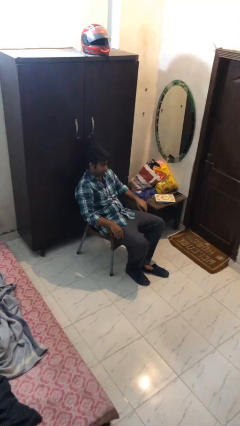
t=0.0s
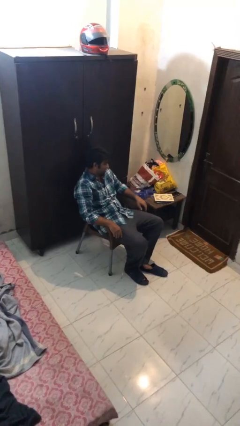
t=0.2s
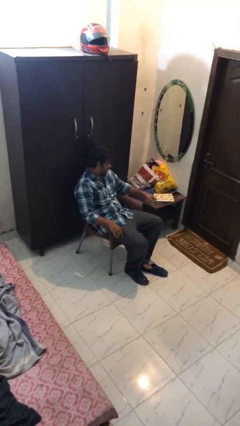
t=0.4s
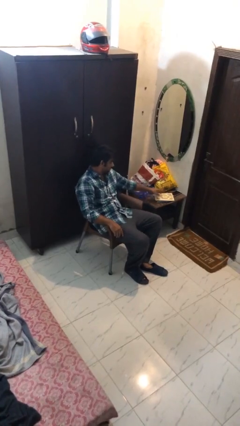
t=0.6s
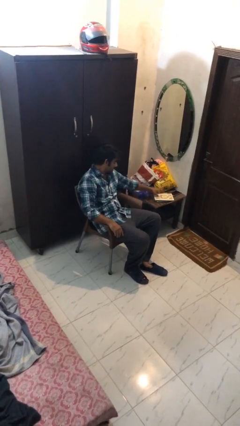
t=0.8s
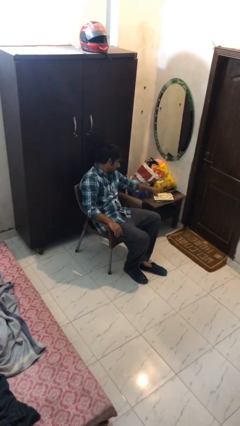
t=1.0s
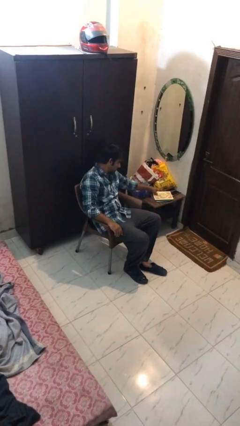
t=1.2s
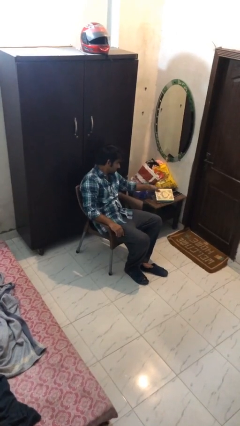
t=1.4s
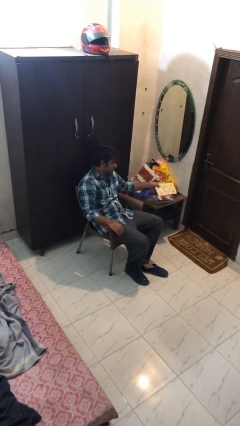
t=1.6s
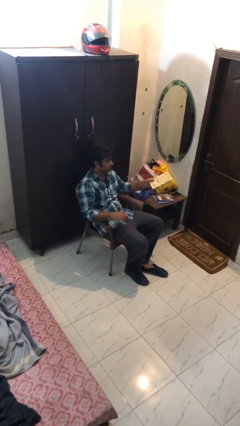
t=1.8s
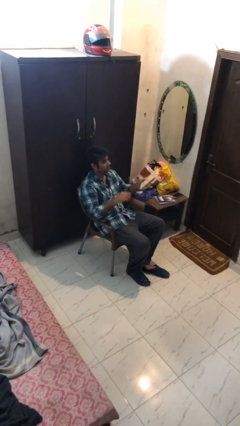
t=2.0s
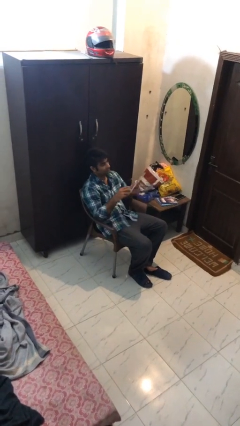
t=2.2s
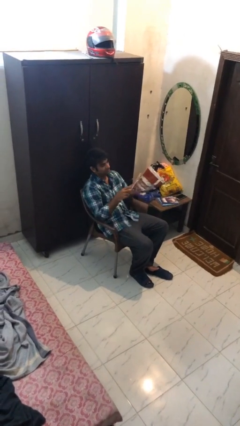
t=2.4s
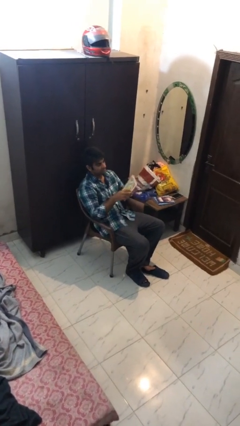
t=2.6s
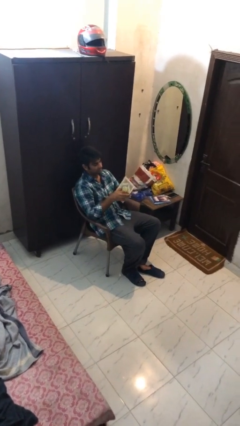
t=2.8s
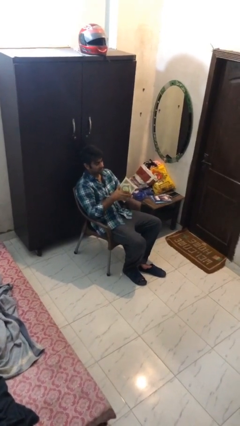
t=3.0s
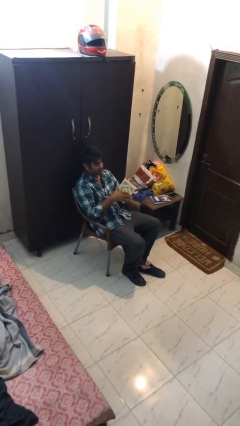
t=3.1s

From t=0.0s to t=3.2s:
person picks up object from table

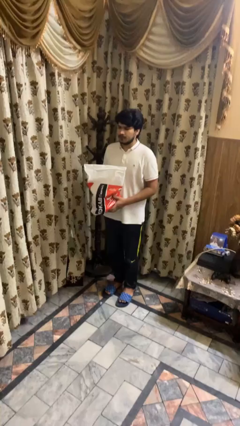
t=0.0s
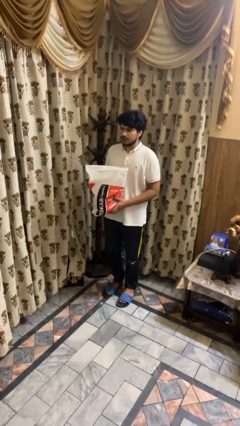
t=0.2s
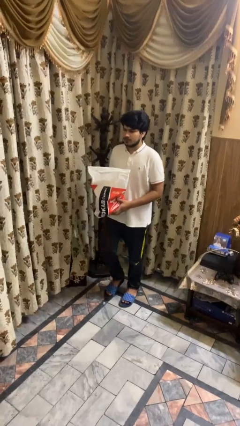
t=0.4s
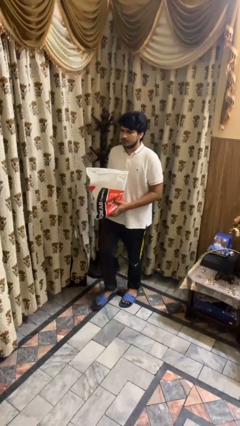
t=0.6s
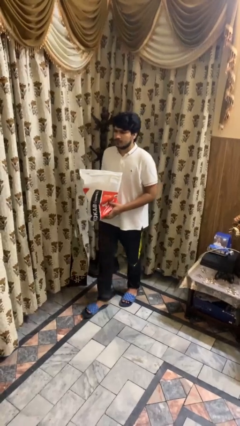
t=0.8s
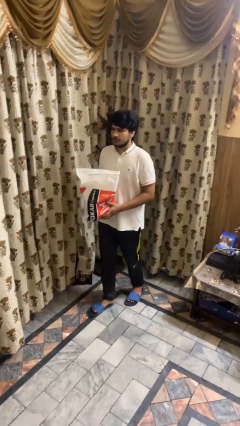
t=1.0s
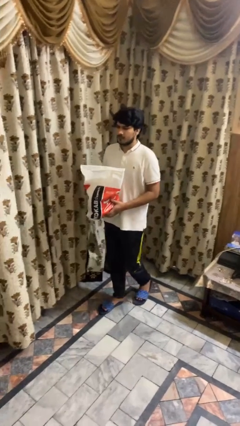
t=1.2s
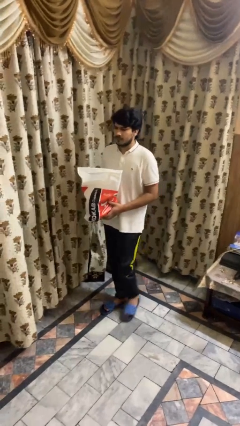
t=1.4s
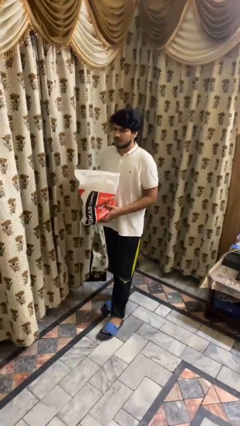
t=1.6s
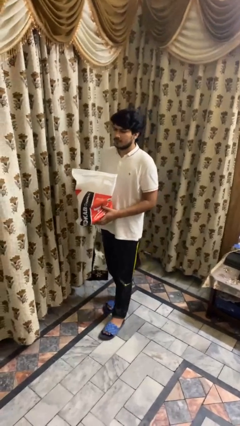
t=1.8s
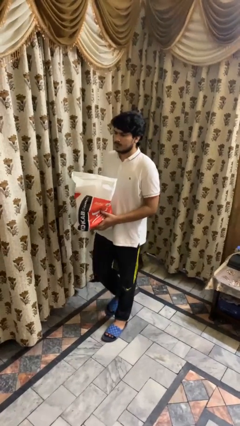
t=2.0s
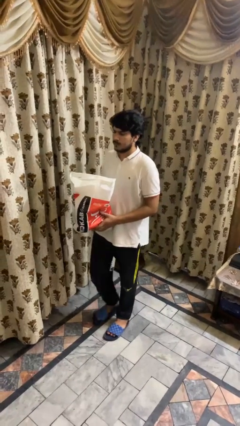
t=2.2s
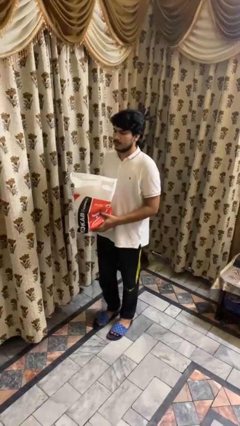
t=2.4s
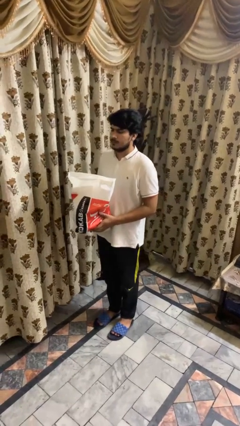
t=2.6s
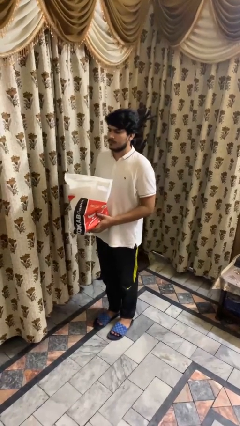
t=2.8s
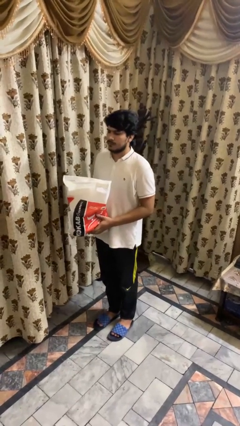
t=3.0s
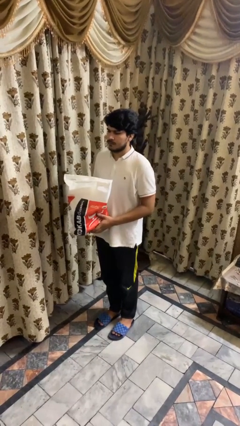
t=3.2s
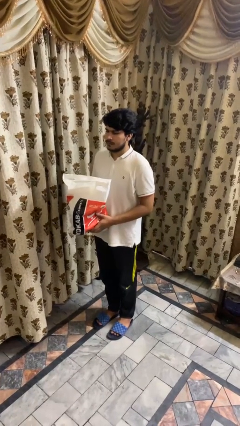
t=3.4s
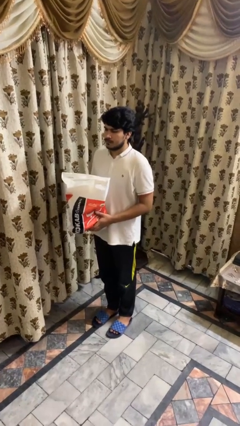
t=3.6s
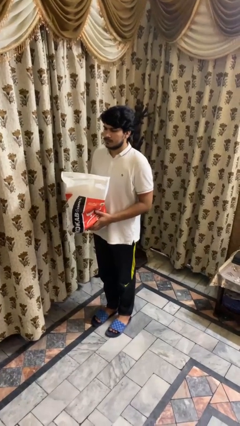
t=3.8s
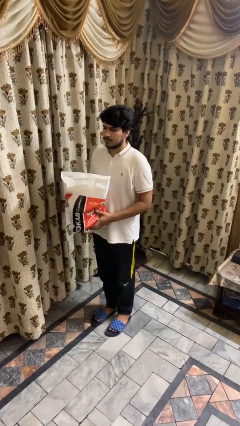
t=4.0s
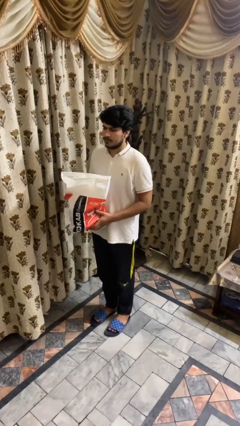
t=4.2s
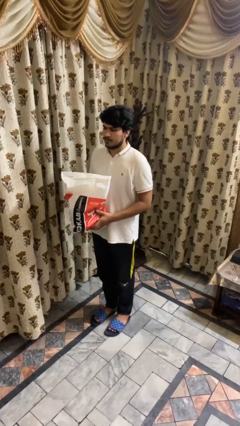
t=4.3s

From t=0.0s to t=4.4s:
person carries groceries

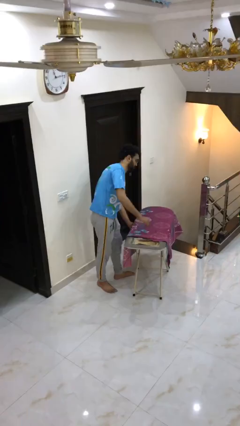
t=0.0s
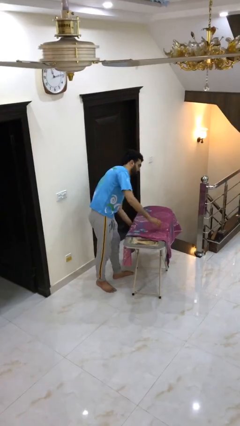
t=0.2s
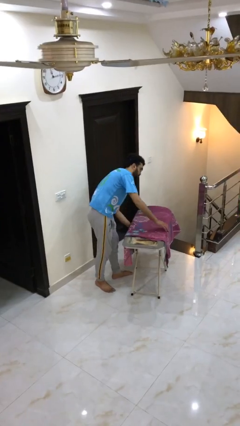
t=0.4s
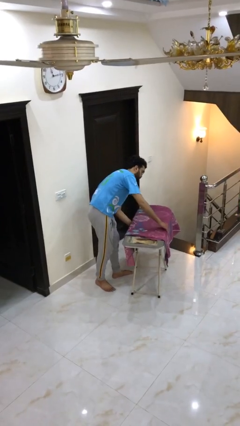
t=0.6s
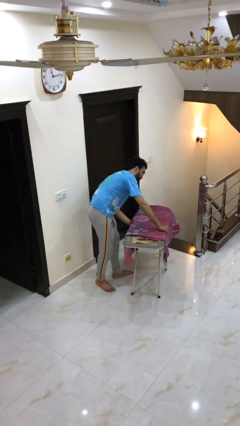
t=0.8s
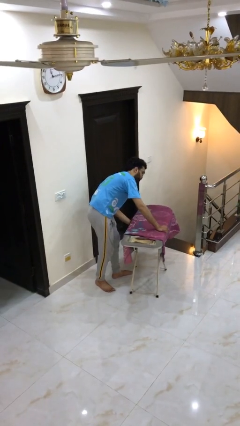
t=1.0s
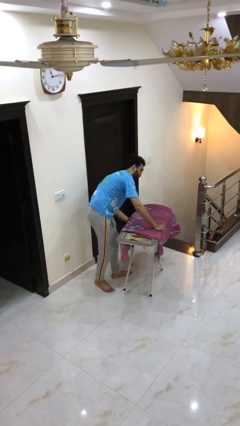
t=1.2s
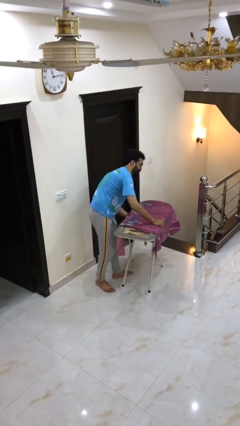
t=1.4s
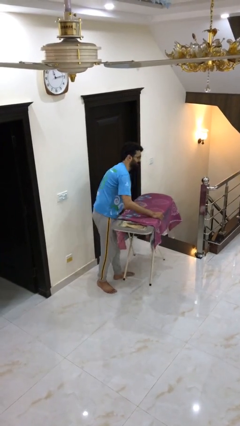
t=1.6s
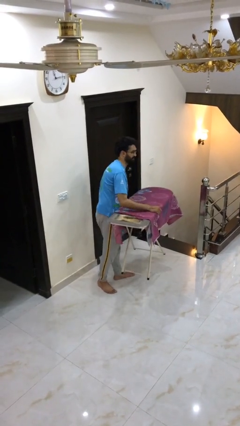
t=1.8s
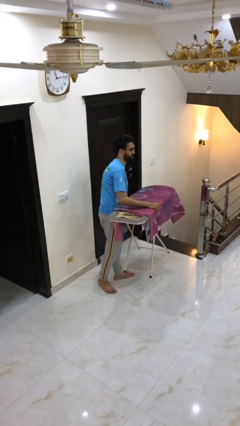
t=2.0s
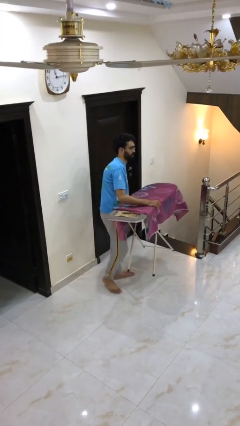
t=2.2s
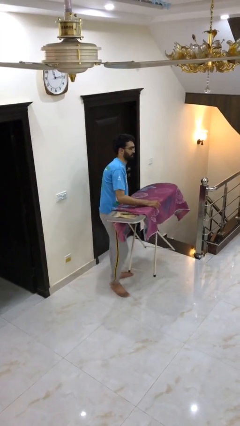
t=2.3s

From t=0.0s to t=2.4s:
person picks up object from floor

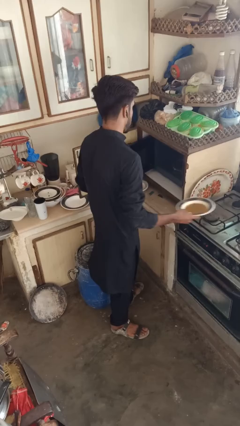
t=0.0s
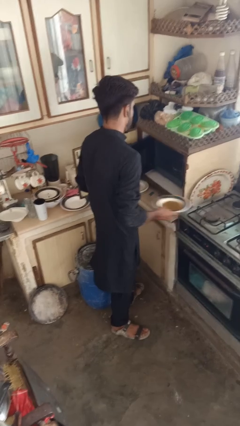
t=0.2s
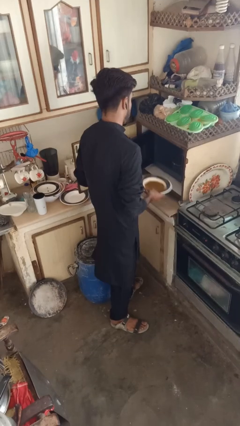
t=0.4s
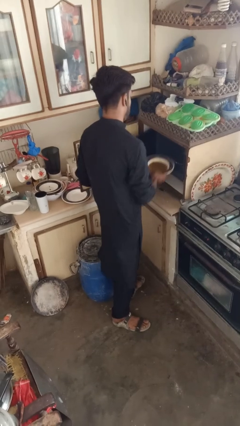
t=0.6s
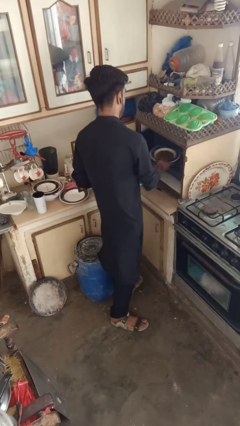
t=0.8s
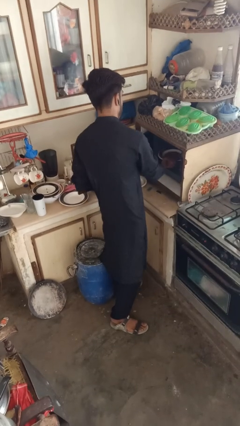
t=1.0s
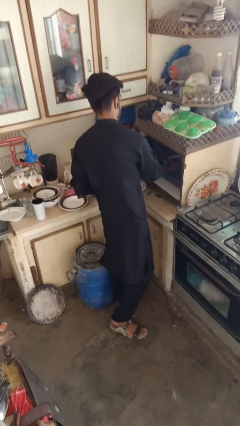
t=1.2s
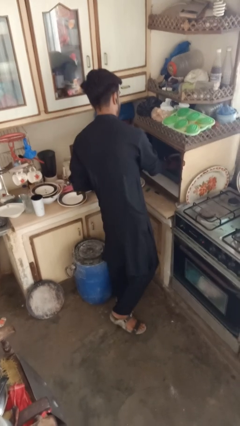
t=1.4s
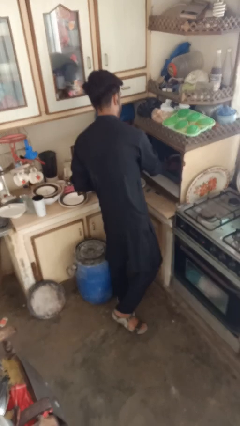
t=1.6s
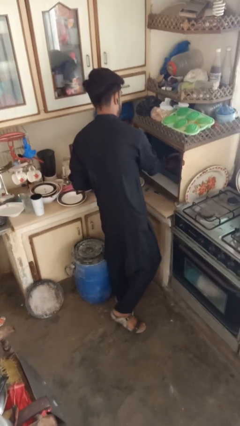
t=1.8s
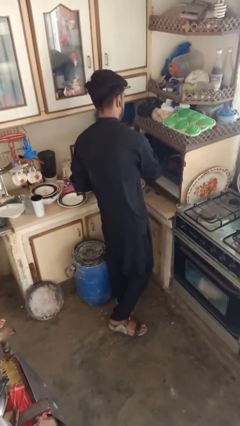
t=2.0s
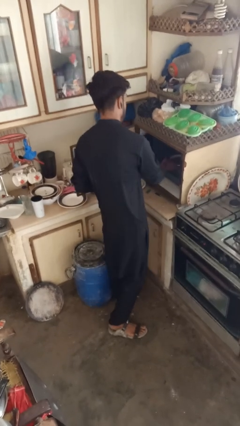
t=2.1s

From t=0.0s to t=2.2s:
person puts object into microwave

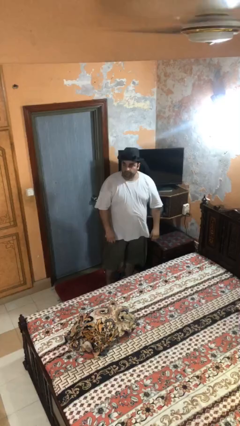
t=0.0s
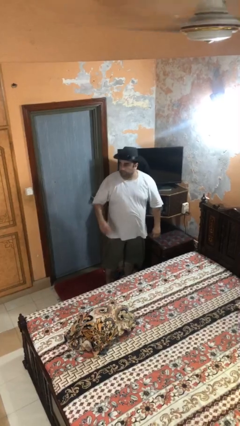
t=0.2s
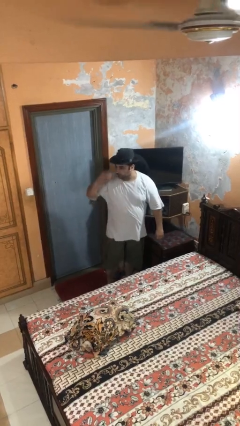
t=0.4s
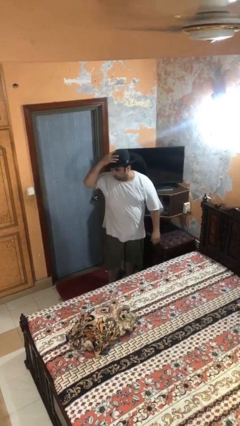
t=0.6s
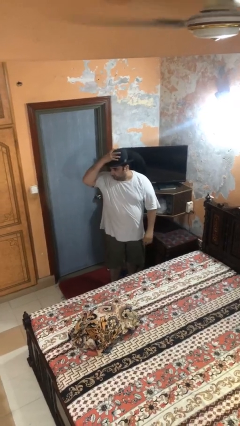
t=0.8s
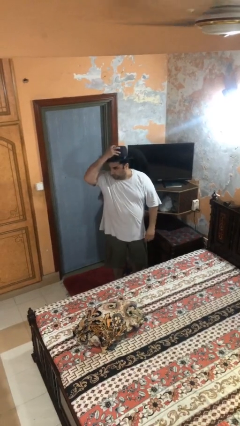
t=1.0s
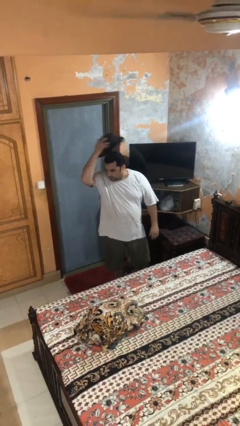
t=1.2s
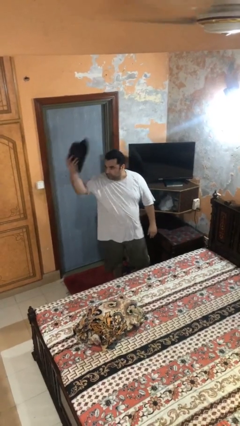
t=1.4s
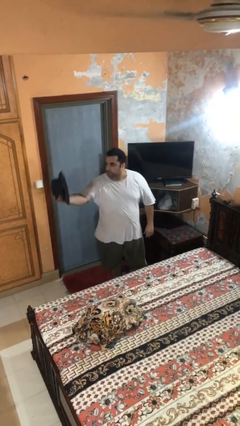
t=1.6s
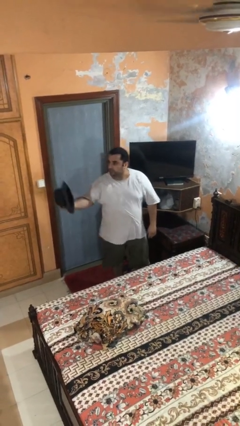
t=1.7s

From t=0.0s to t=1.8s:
person takes off hat

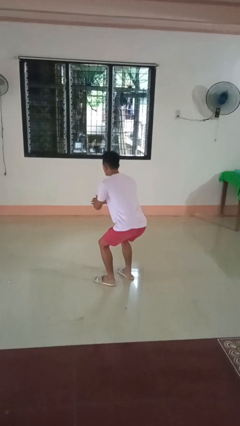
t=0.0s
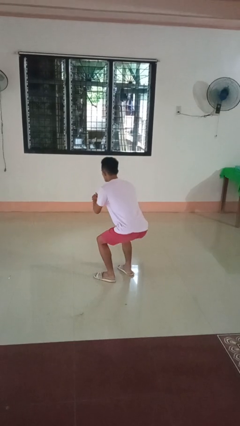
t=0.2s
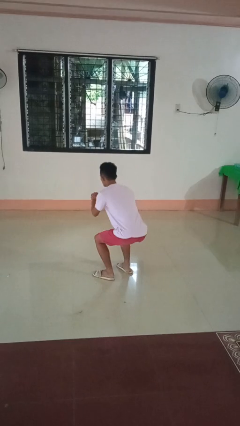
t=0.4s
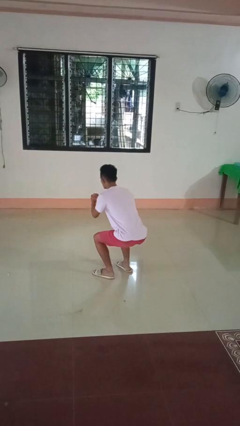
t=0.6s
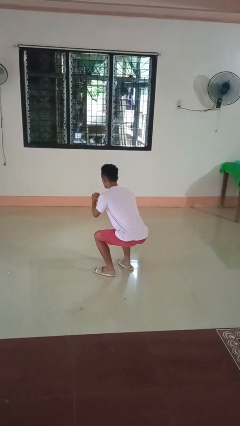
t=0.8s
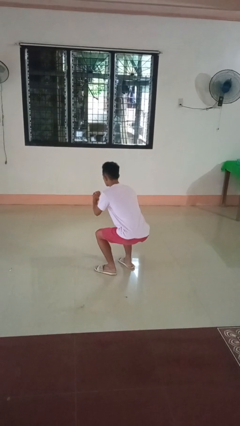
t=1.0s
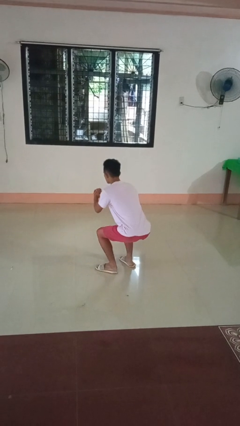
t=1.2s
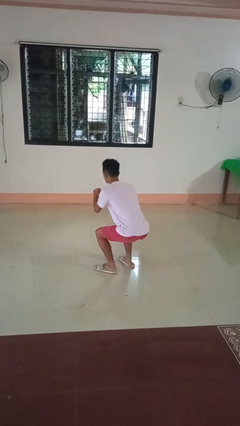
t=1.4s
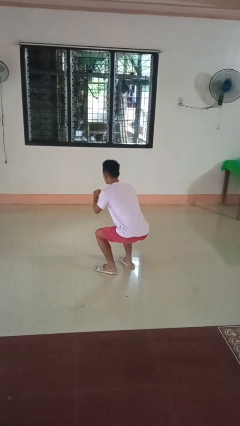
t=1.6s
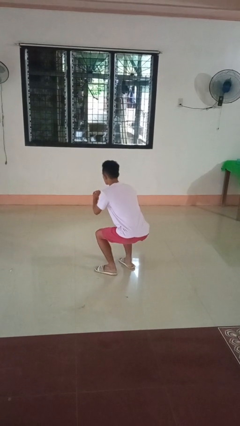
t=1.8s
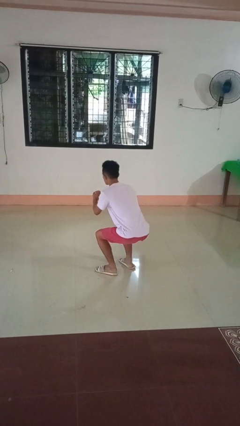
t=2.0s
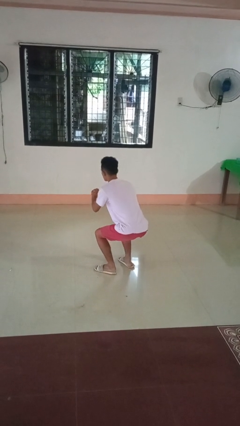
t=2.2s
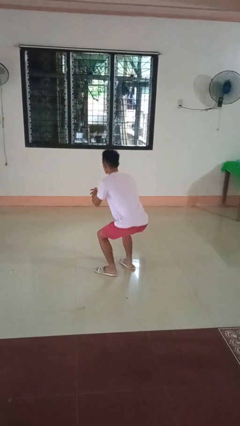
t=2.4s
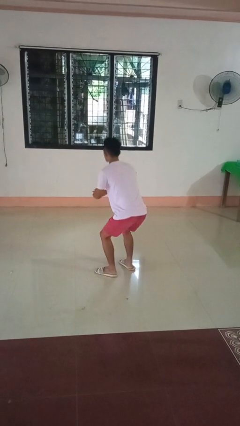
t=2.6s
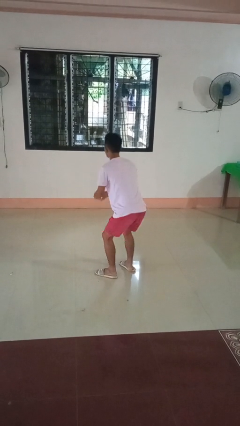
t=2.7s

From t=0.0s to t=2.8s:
person squats

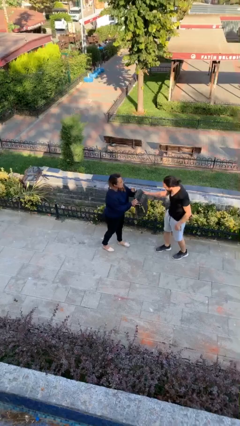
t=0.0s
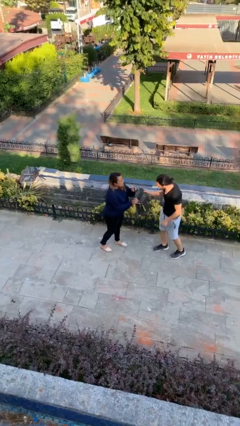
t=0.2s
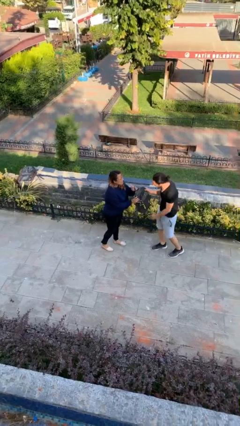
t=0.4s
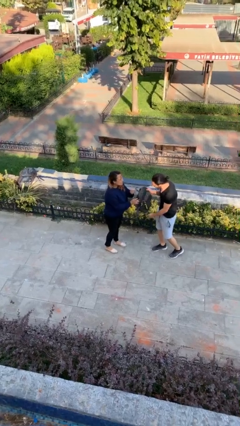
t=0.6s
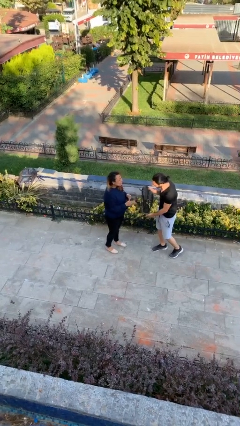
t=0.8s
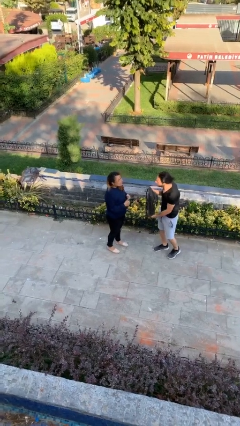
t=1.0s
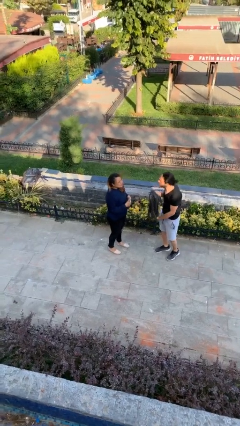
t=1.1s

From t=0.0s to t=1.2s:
person transfers object to person
